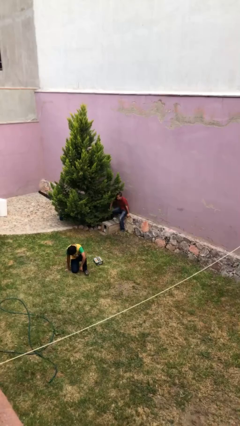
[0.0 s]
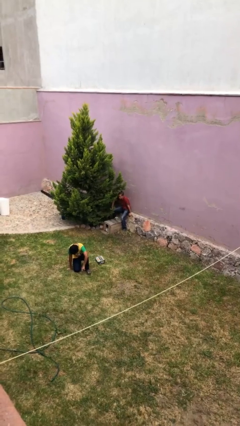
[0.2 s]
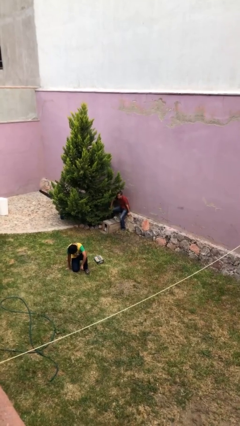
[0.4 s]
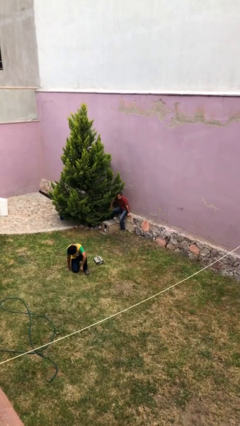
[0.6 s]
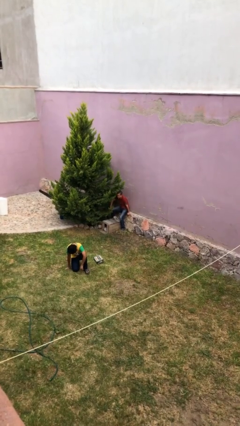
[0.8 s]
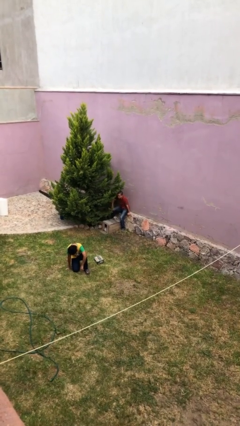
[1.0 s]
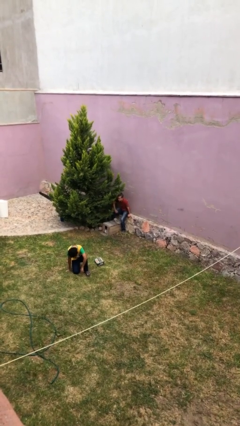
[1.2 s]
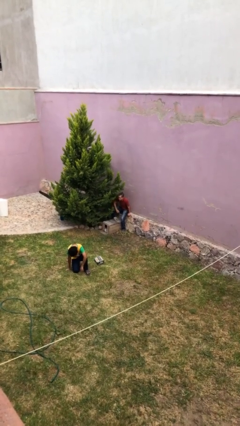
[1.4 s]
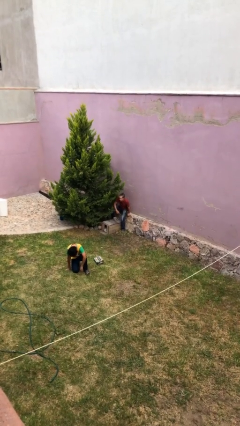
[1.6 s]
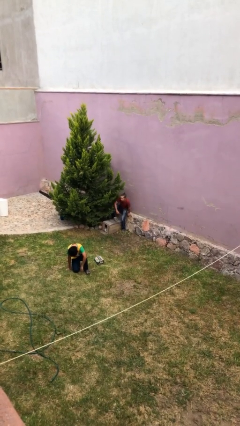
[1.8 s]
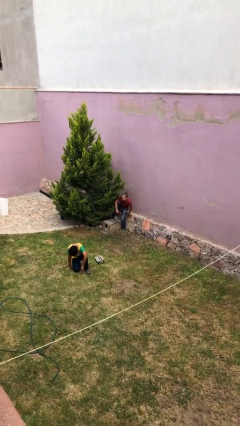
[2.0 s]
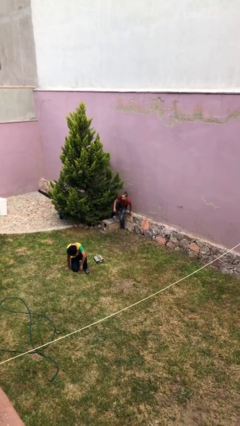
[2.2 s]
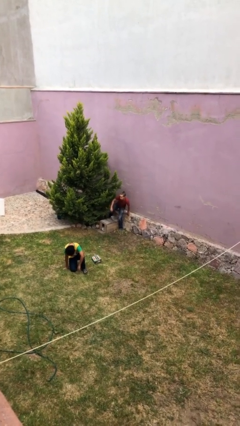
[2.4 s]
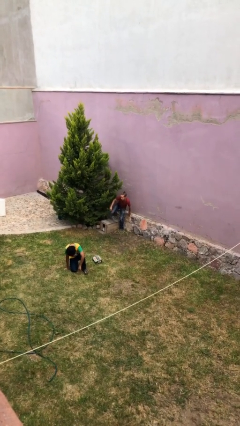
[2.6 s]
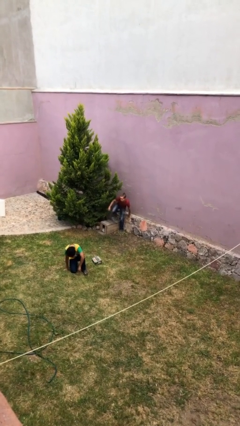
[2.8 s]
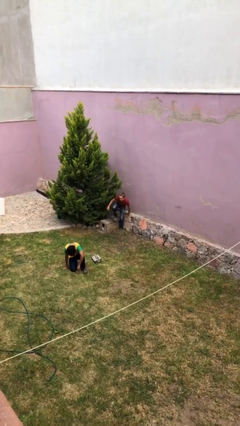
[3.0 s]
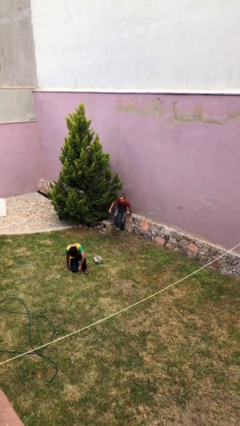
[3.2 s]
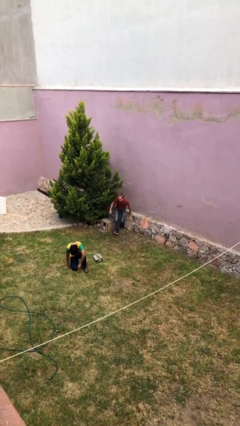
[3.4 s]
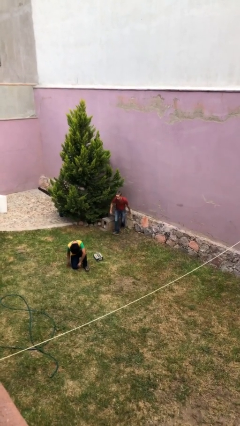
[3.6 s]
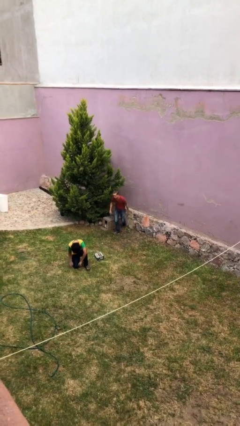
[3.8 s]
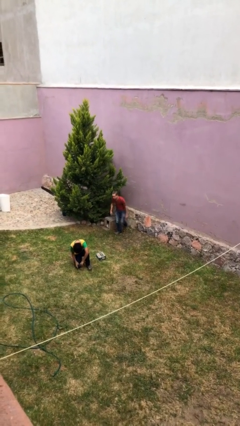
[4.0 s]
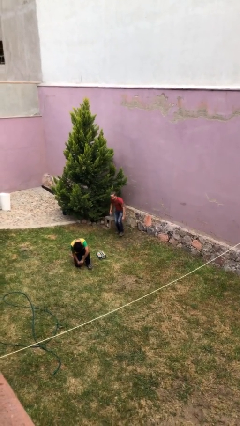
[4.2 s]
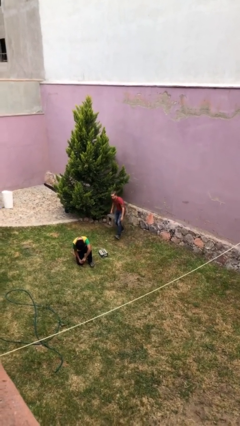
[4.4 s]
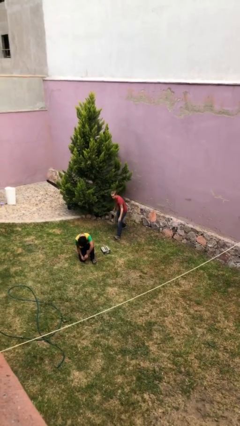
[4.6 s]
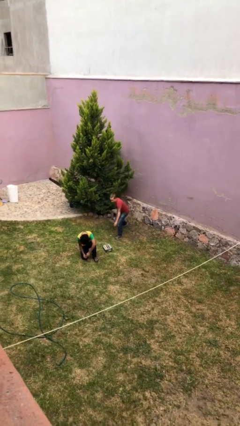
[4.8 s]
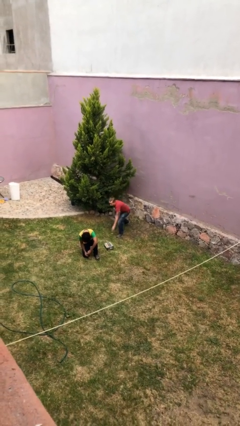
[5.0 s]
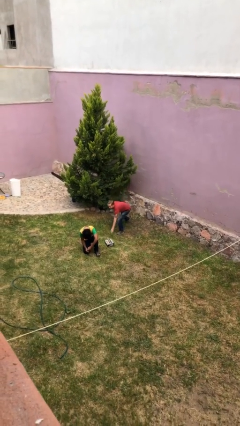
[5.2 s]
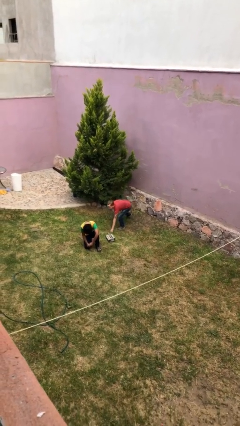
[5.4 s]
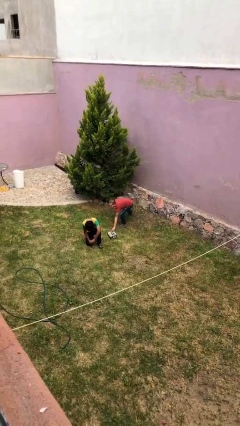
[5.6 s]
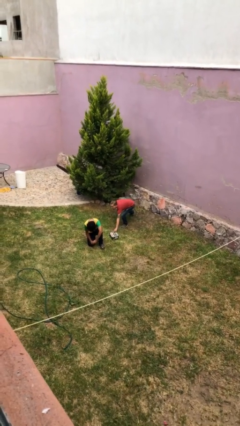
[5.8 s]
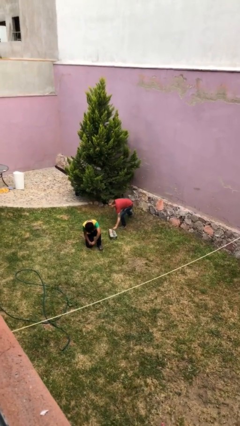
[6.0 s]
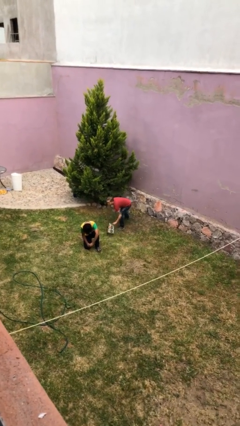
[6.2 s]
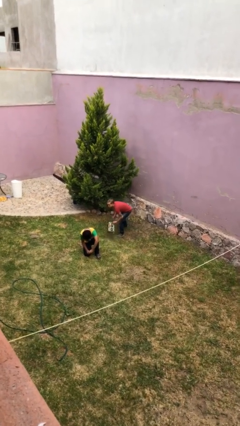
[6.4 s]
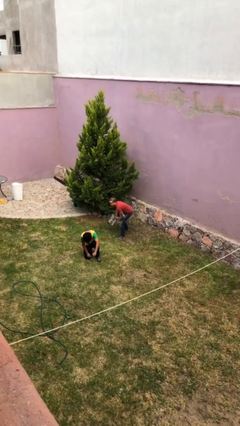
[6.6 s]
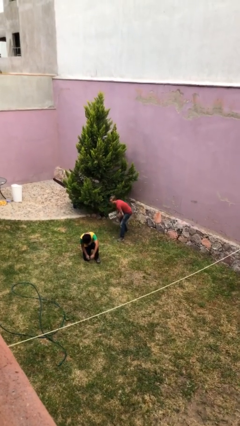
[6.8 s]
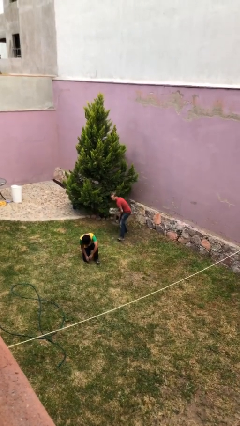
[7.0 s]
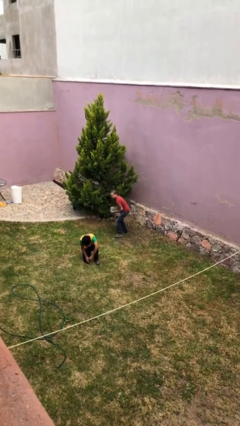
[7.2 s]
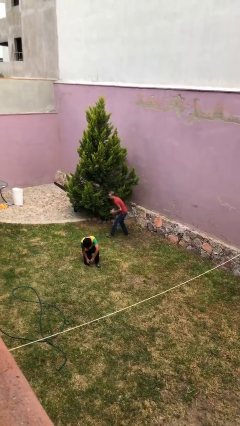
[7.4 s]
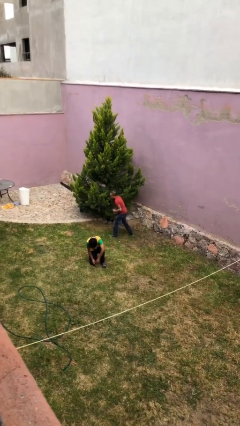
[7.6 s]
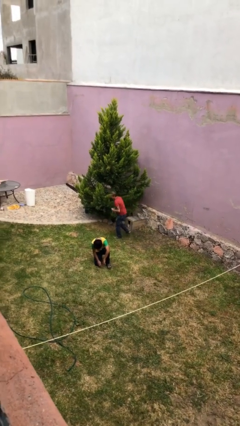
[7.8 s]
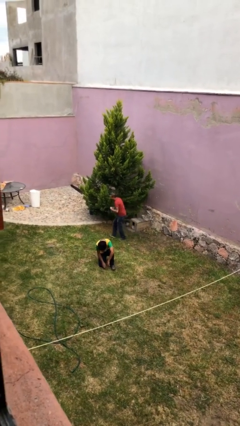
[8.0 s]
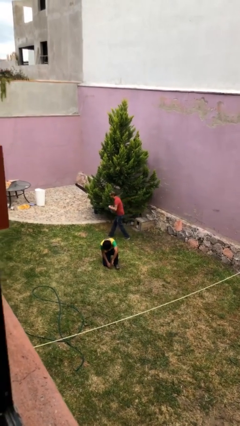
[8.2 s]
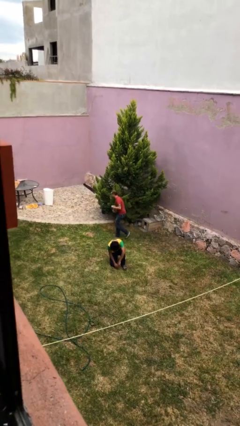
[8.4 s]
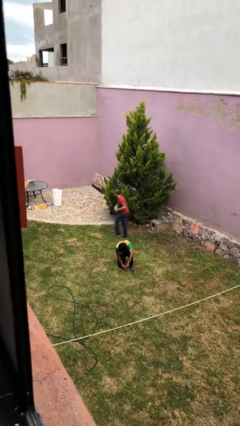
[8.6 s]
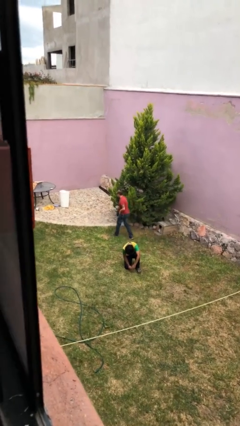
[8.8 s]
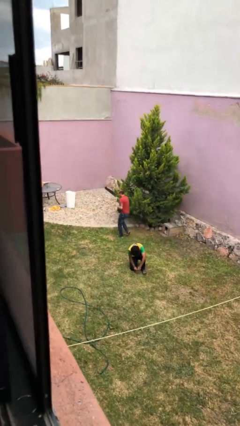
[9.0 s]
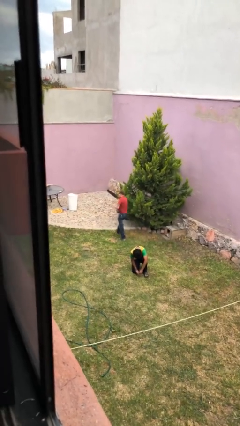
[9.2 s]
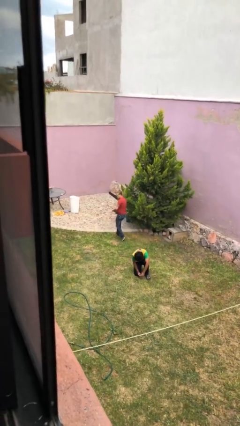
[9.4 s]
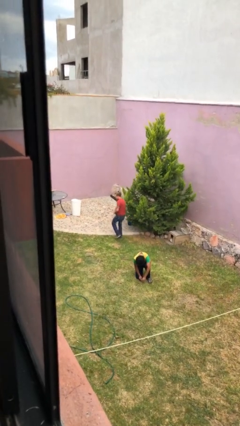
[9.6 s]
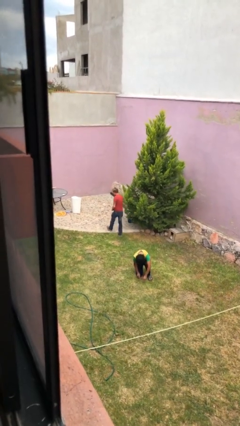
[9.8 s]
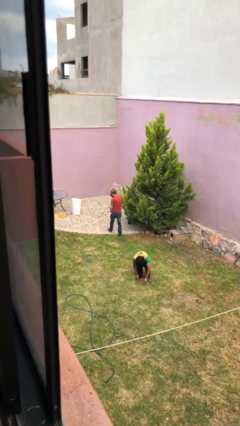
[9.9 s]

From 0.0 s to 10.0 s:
person steals object from person

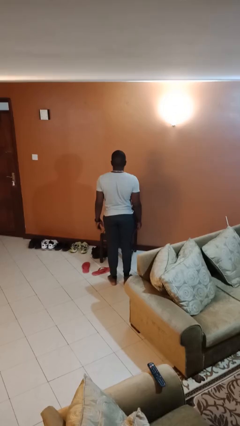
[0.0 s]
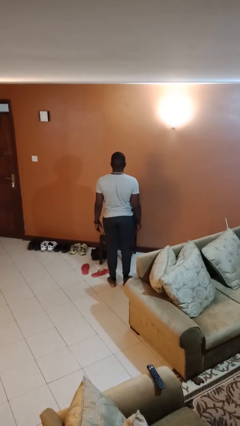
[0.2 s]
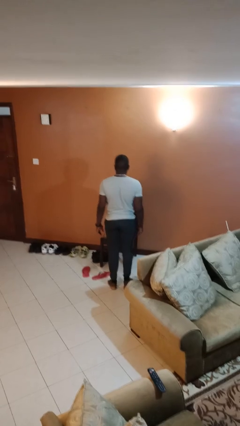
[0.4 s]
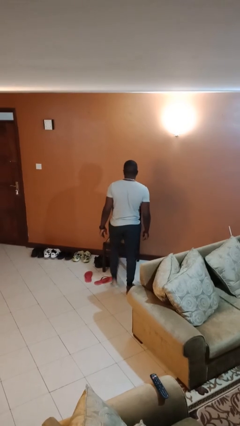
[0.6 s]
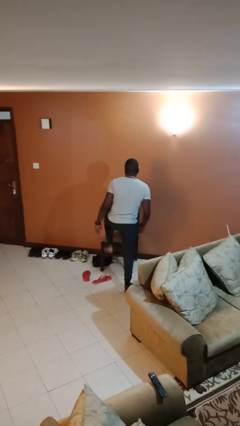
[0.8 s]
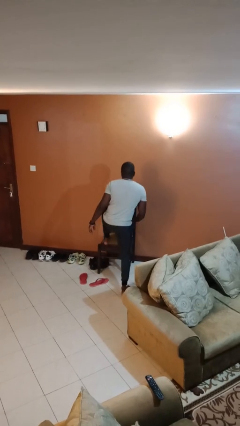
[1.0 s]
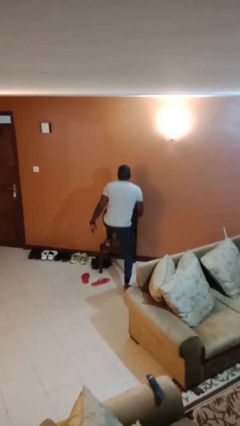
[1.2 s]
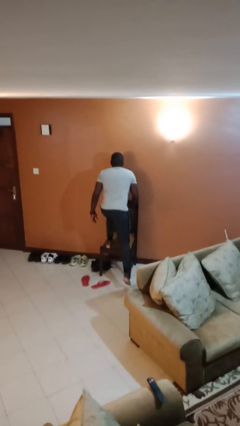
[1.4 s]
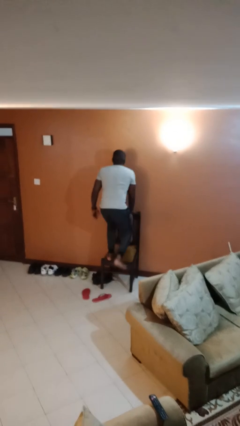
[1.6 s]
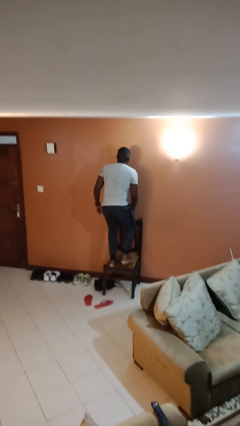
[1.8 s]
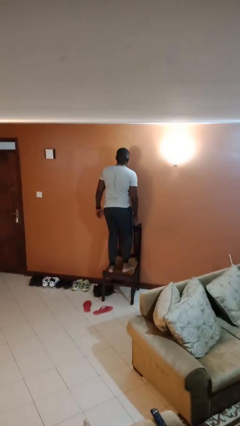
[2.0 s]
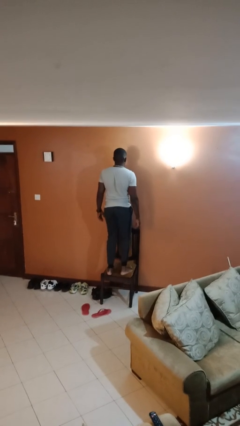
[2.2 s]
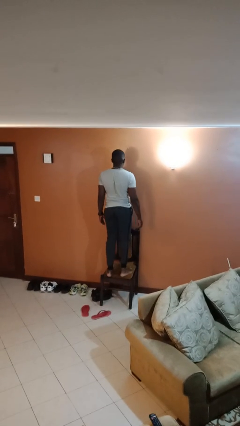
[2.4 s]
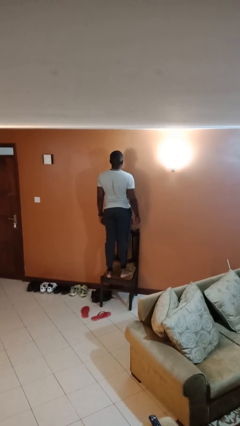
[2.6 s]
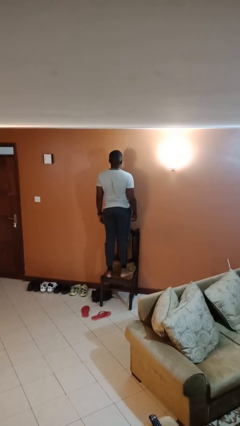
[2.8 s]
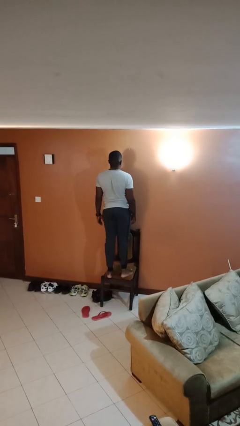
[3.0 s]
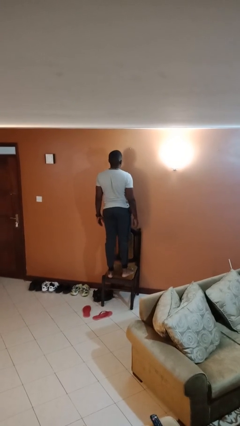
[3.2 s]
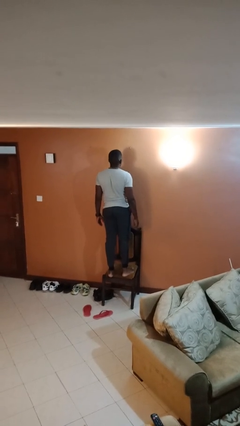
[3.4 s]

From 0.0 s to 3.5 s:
person climbs on chair

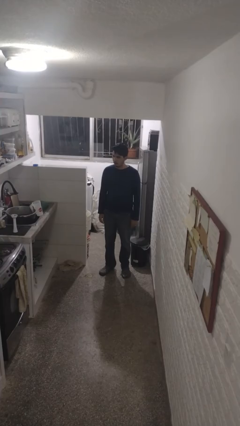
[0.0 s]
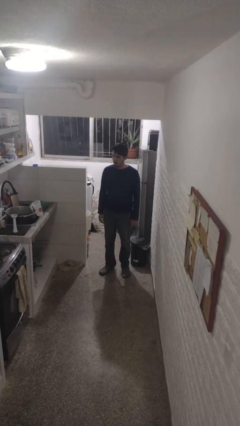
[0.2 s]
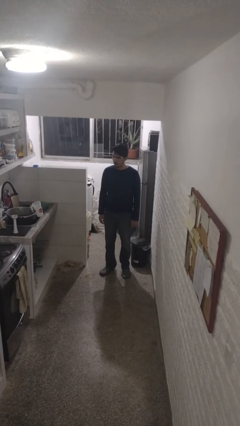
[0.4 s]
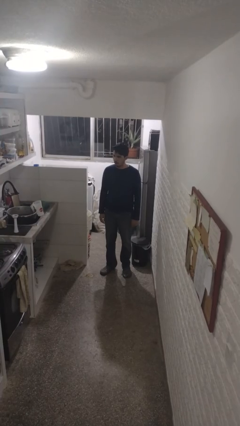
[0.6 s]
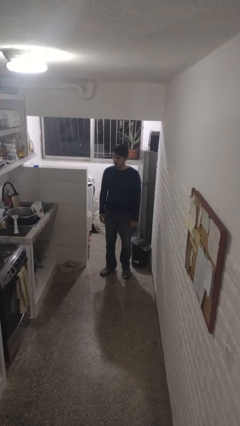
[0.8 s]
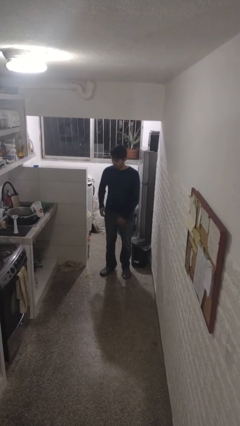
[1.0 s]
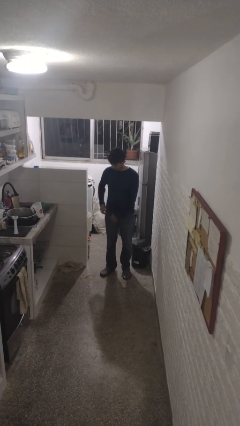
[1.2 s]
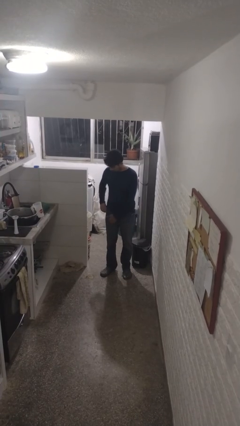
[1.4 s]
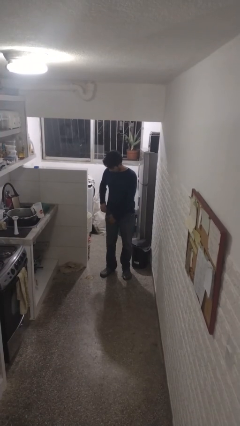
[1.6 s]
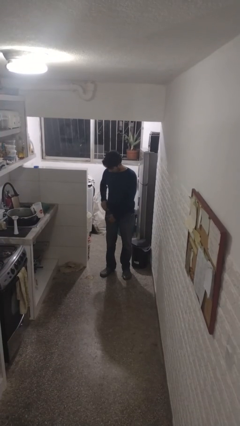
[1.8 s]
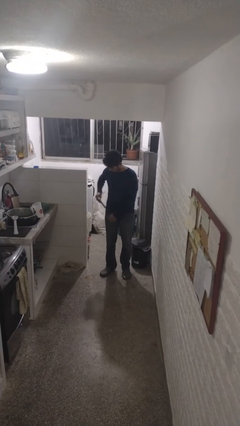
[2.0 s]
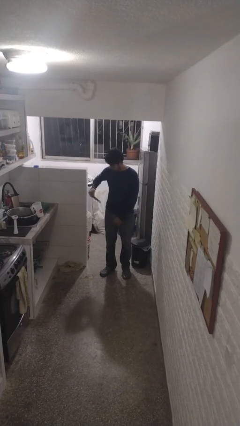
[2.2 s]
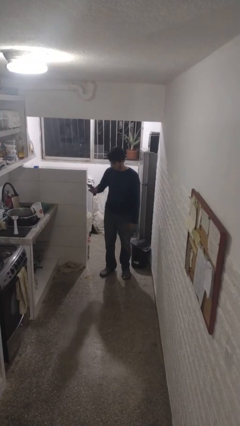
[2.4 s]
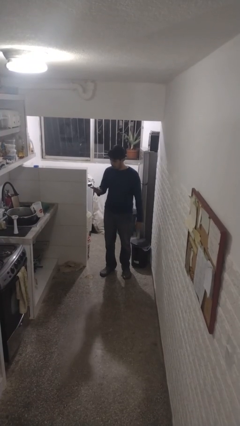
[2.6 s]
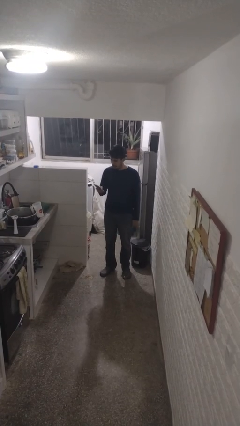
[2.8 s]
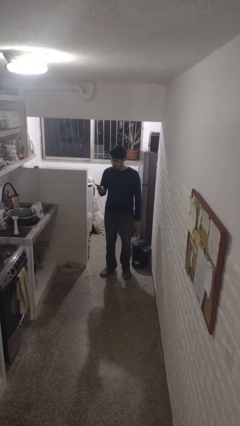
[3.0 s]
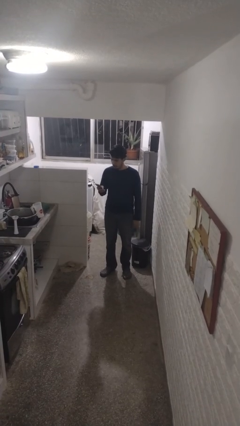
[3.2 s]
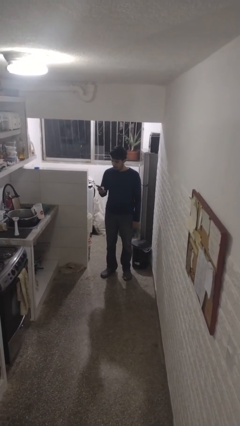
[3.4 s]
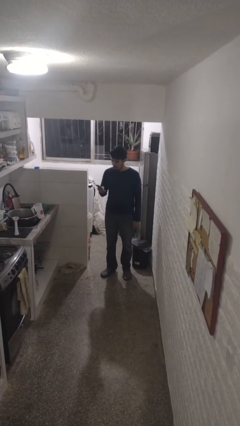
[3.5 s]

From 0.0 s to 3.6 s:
person takes phone from pocket

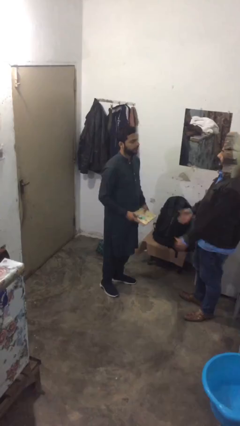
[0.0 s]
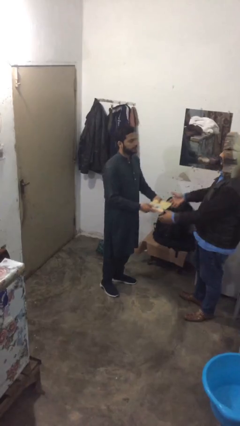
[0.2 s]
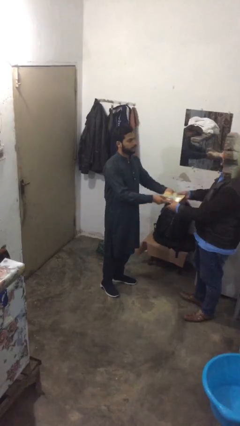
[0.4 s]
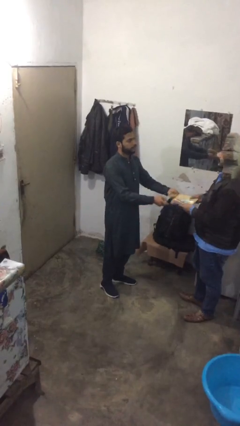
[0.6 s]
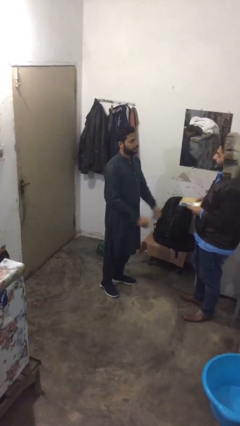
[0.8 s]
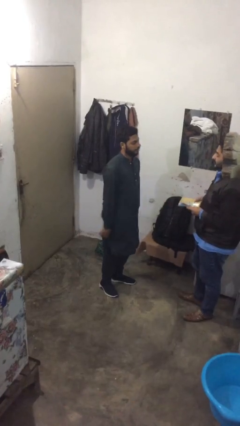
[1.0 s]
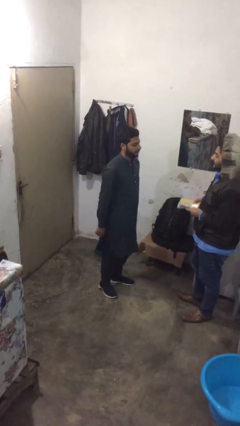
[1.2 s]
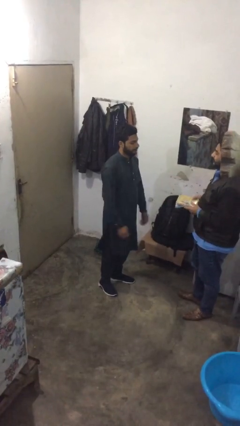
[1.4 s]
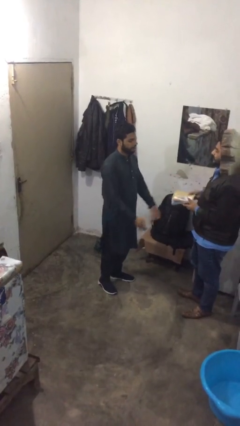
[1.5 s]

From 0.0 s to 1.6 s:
person transfers object to person
